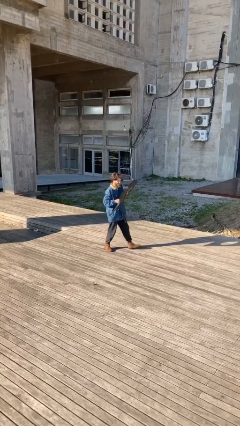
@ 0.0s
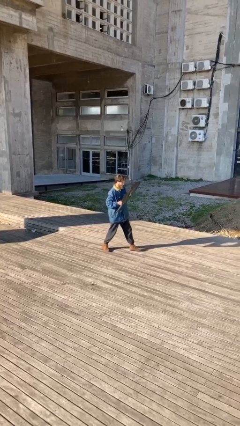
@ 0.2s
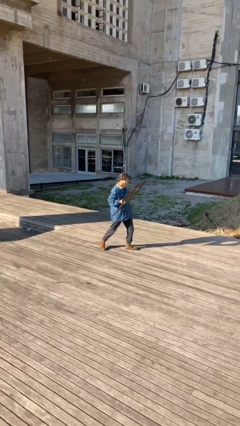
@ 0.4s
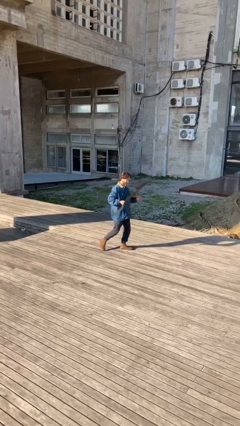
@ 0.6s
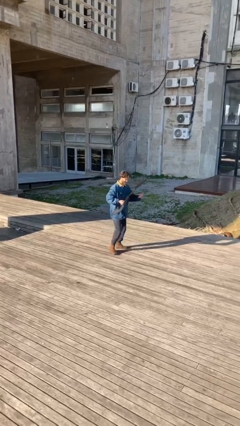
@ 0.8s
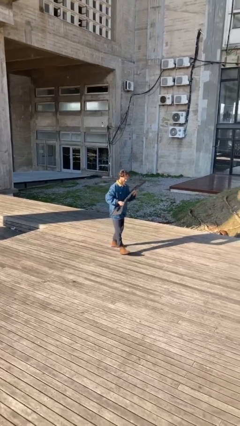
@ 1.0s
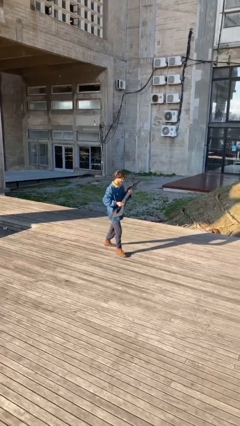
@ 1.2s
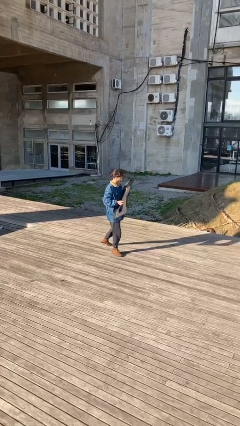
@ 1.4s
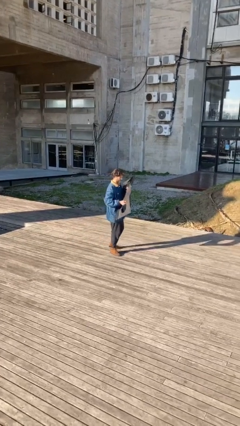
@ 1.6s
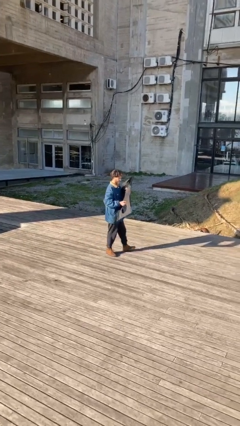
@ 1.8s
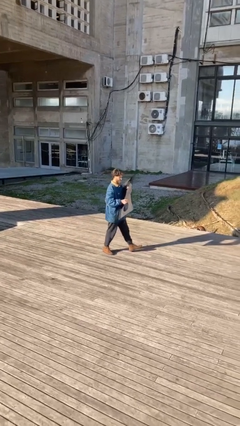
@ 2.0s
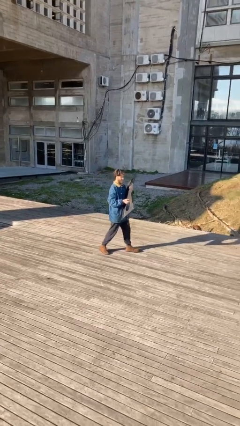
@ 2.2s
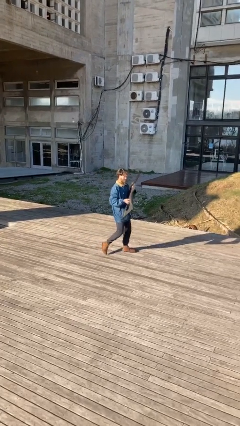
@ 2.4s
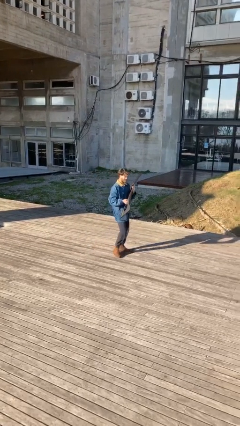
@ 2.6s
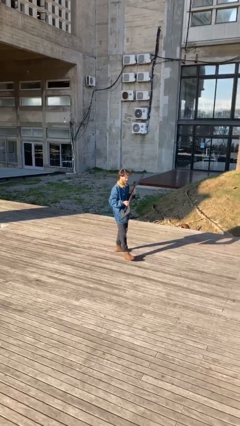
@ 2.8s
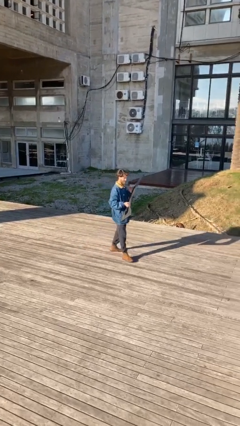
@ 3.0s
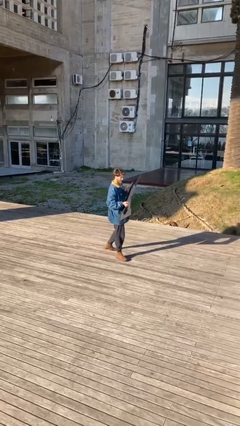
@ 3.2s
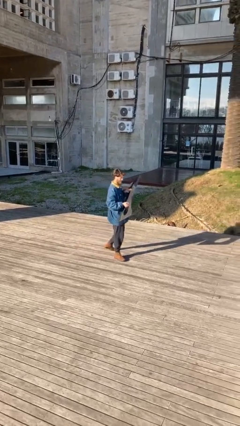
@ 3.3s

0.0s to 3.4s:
person carries heavy object

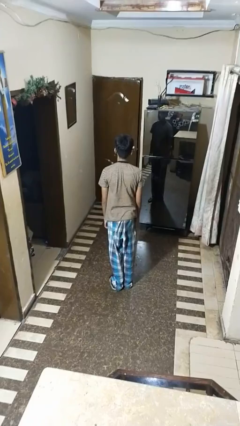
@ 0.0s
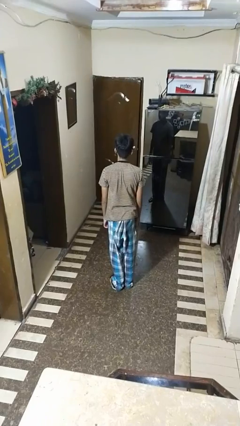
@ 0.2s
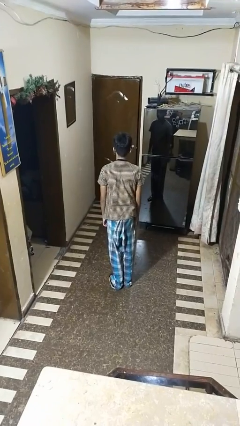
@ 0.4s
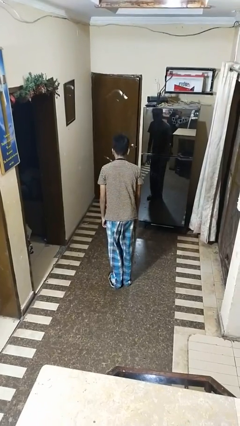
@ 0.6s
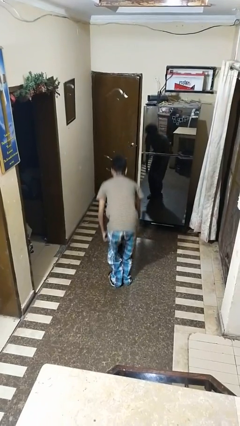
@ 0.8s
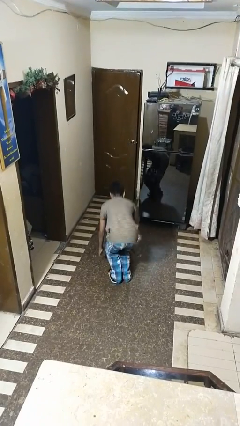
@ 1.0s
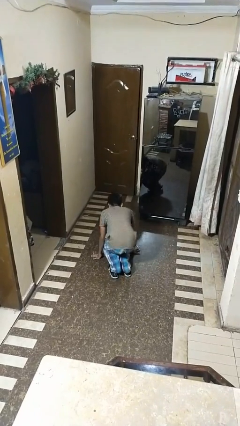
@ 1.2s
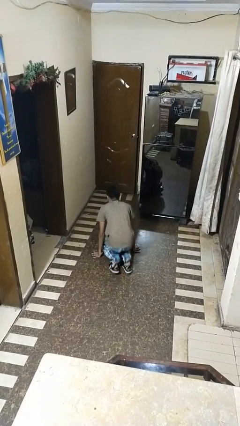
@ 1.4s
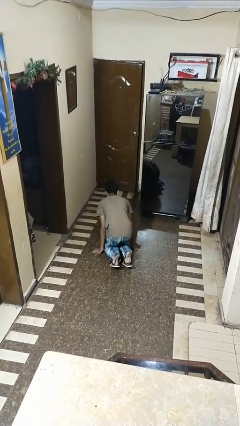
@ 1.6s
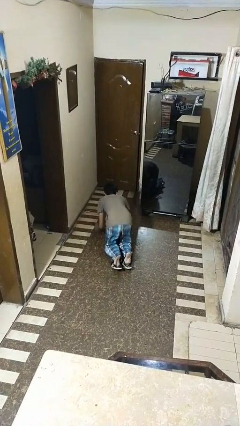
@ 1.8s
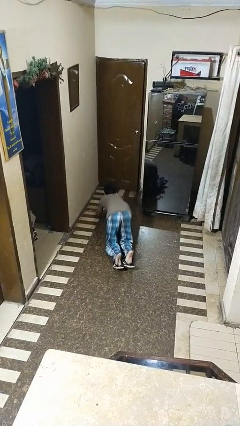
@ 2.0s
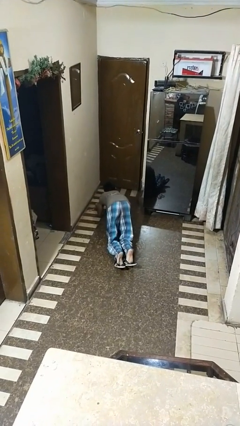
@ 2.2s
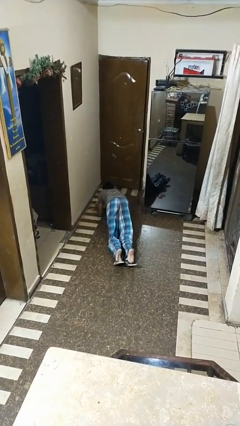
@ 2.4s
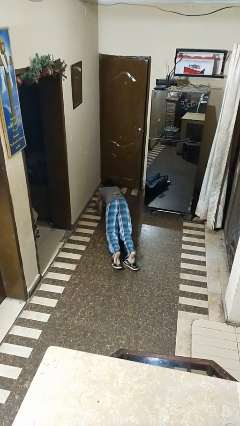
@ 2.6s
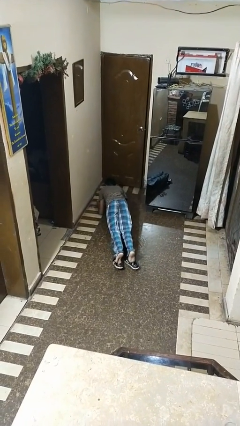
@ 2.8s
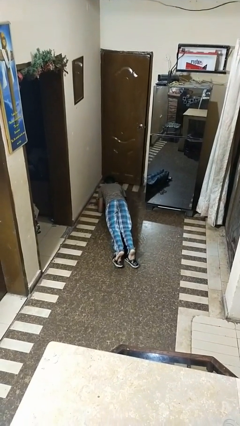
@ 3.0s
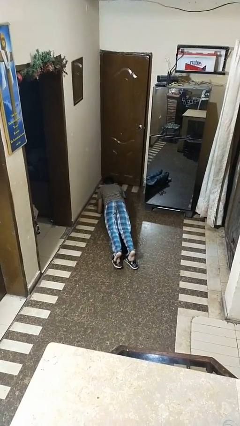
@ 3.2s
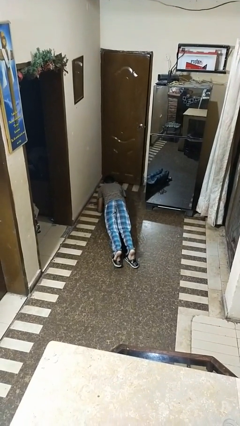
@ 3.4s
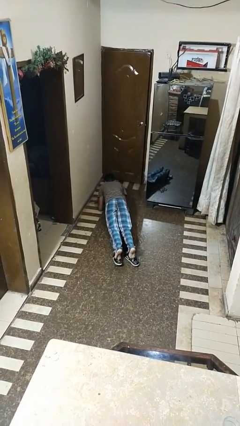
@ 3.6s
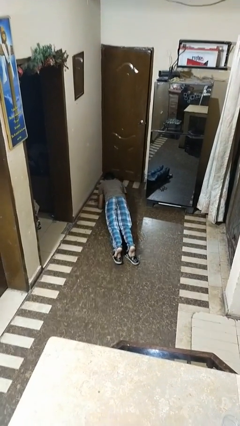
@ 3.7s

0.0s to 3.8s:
person exercises with plank

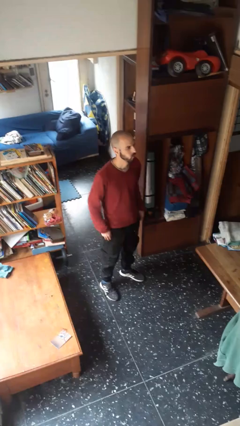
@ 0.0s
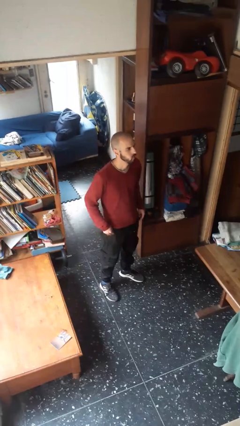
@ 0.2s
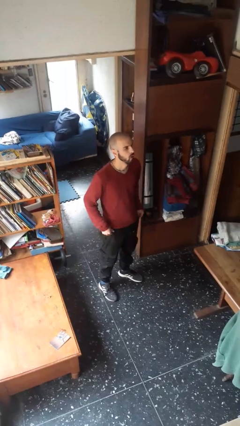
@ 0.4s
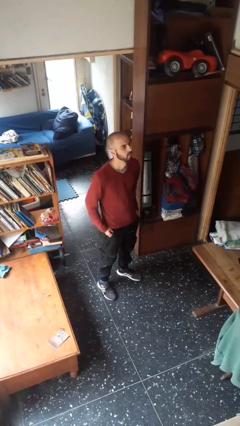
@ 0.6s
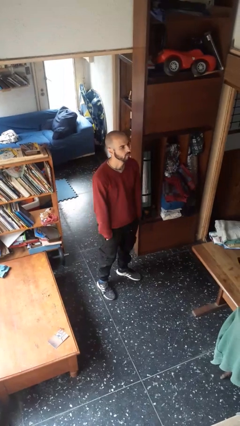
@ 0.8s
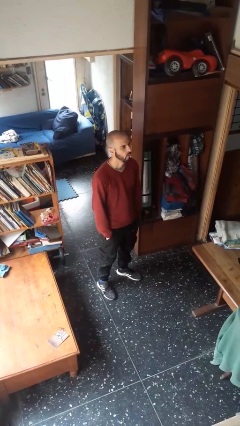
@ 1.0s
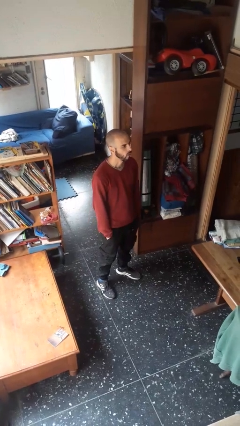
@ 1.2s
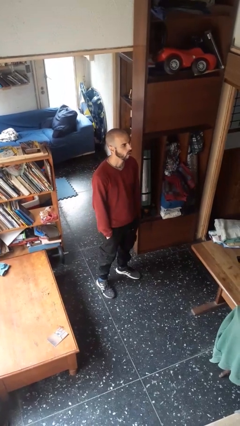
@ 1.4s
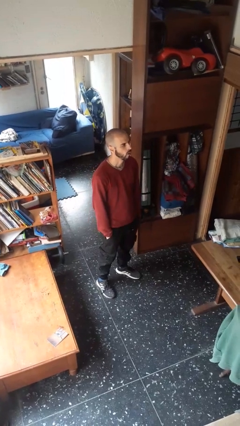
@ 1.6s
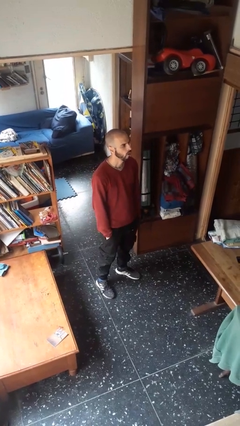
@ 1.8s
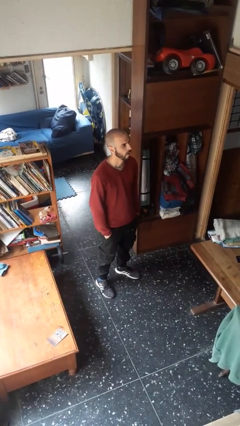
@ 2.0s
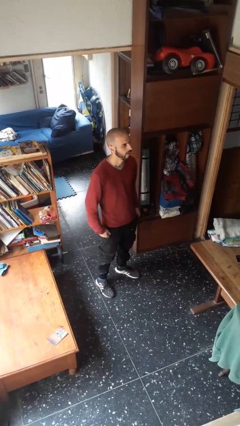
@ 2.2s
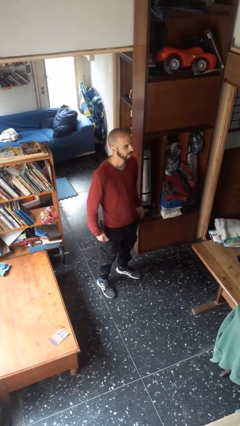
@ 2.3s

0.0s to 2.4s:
person puts hands in back pockets

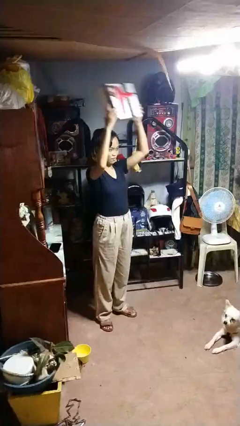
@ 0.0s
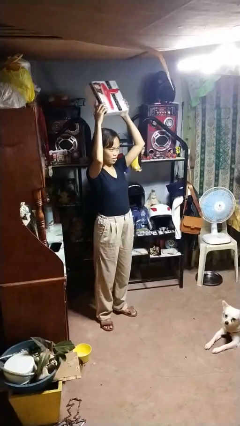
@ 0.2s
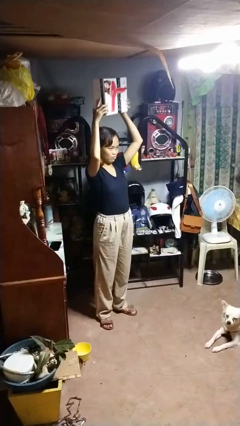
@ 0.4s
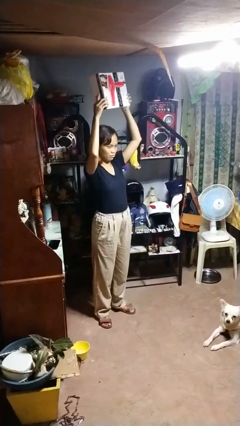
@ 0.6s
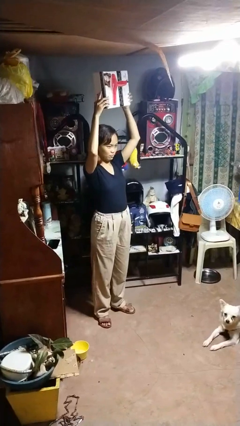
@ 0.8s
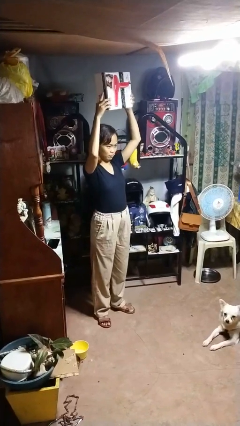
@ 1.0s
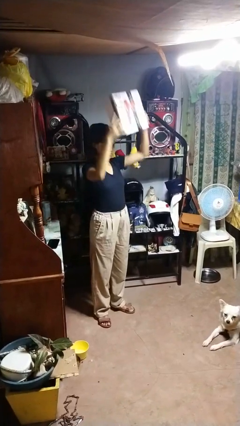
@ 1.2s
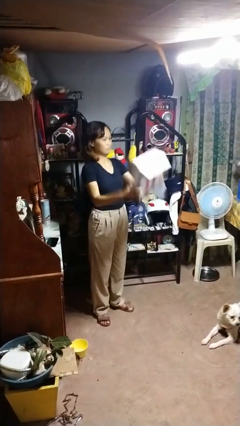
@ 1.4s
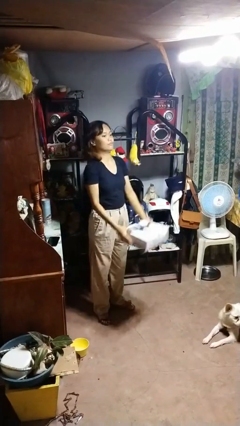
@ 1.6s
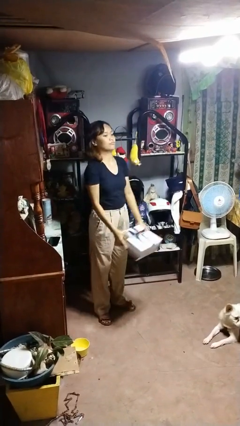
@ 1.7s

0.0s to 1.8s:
person holds object above head

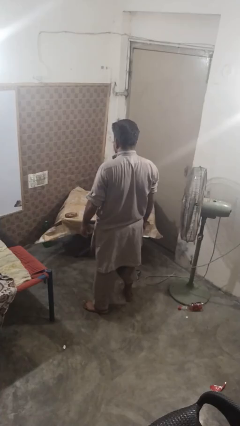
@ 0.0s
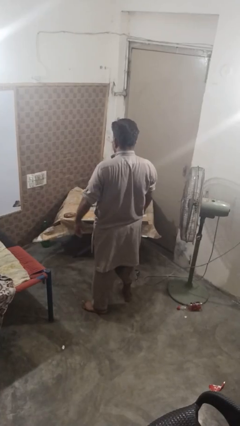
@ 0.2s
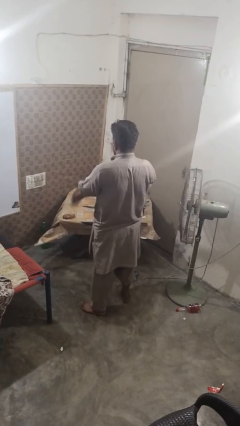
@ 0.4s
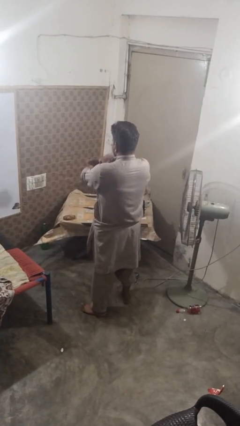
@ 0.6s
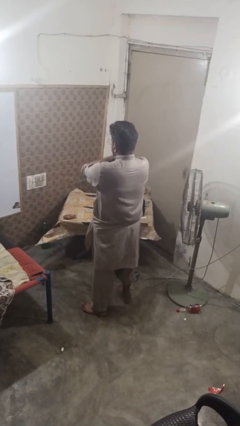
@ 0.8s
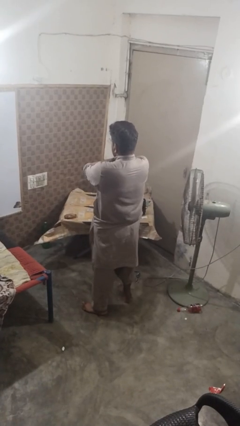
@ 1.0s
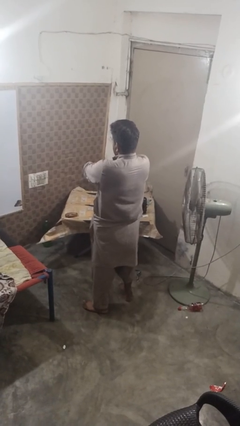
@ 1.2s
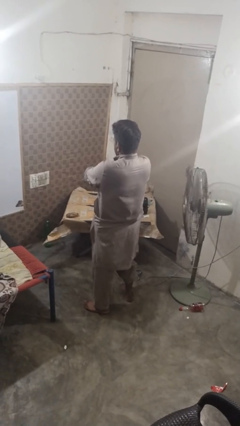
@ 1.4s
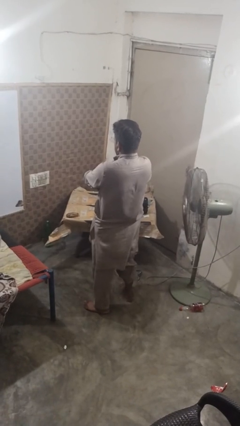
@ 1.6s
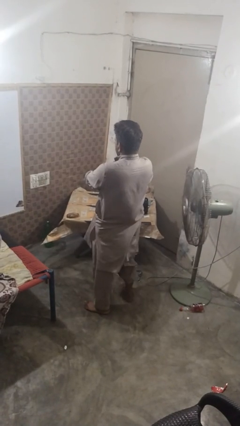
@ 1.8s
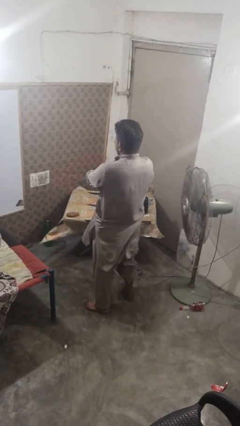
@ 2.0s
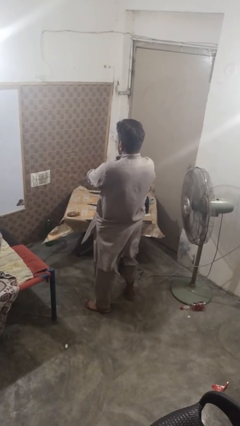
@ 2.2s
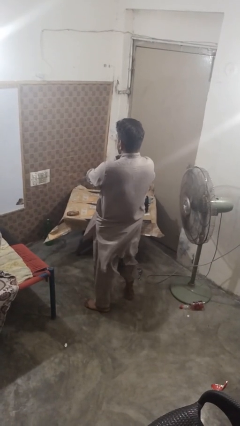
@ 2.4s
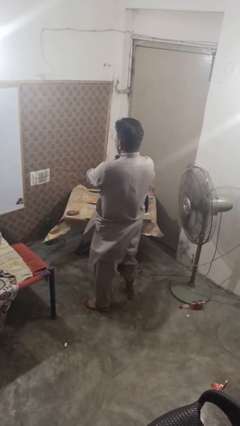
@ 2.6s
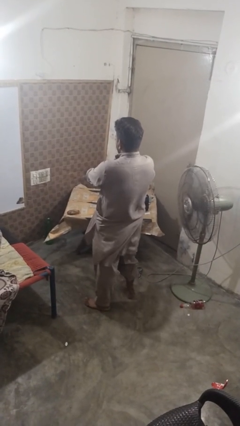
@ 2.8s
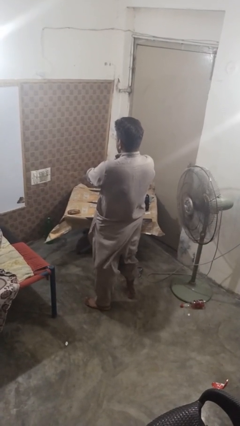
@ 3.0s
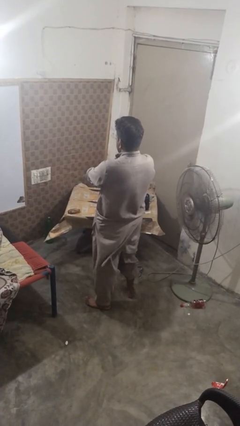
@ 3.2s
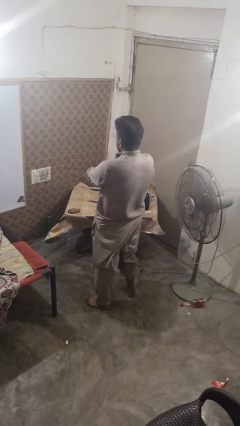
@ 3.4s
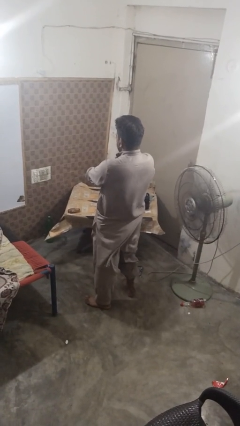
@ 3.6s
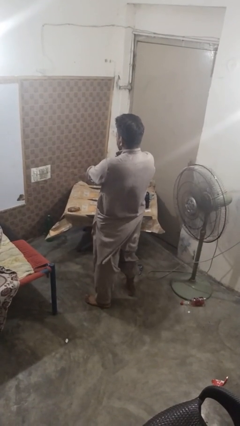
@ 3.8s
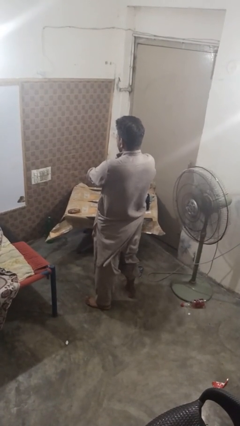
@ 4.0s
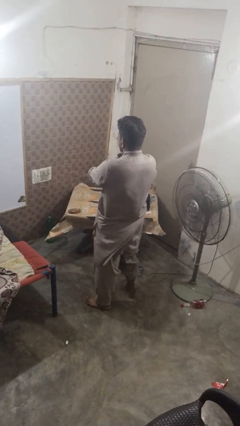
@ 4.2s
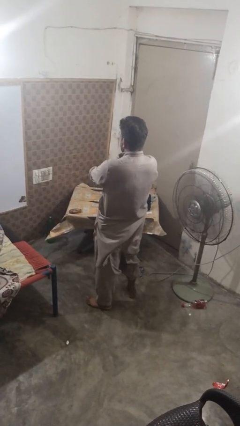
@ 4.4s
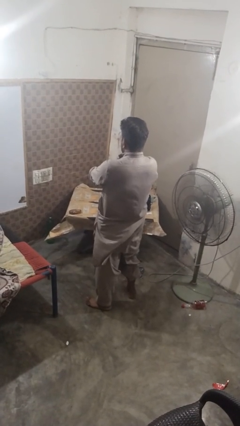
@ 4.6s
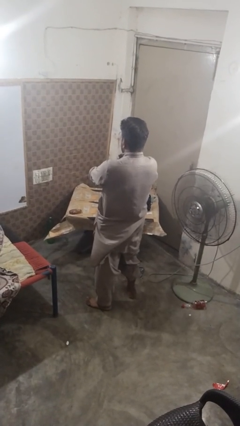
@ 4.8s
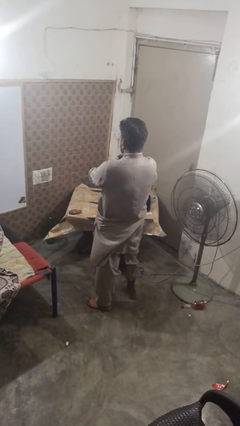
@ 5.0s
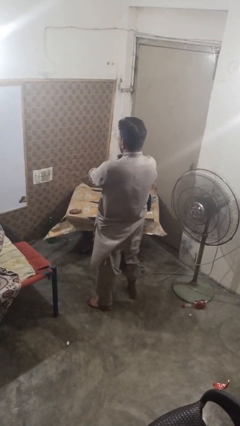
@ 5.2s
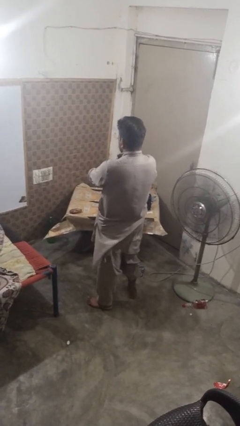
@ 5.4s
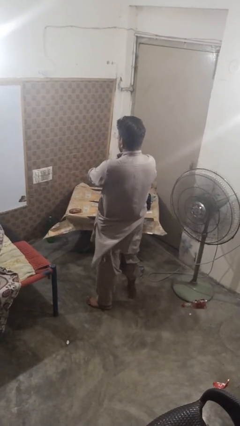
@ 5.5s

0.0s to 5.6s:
person crosses arms

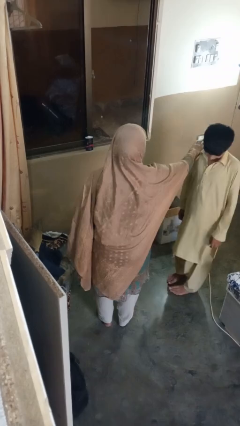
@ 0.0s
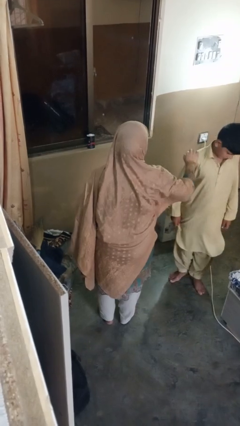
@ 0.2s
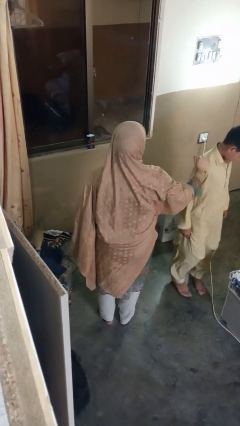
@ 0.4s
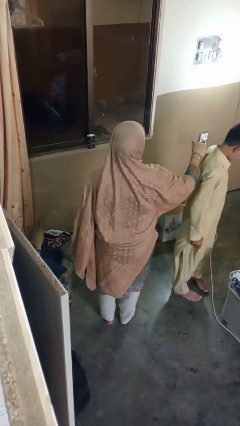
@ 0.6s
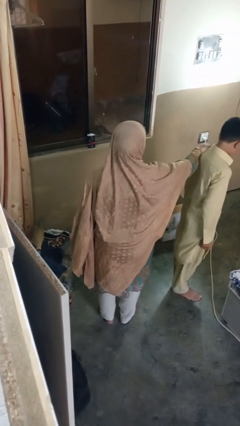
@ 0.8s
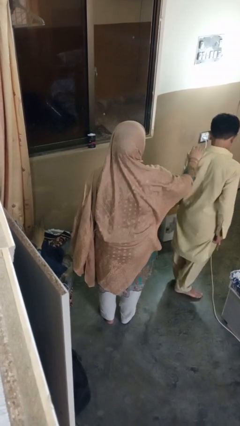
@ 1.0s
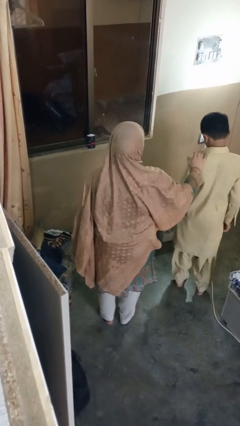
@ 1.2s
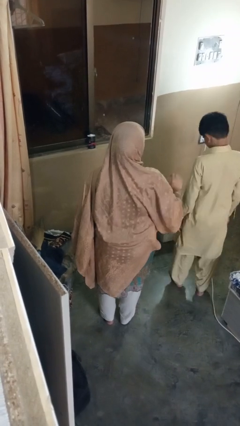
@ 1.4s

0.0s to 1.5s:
person spins person around
